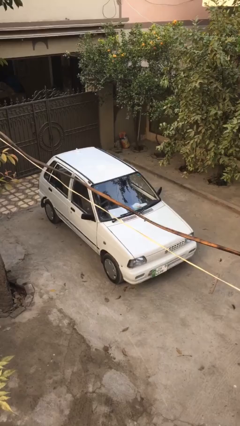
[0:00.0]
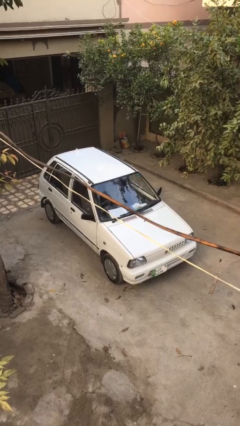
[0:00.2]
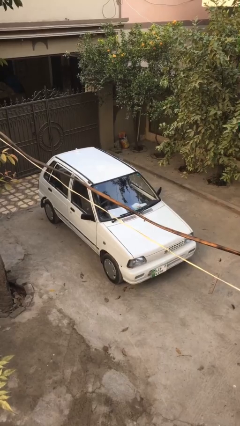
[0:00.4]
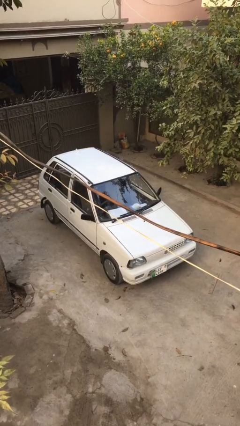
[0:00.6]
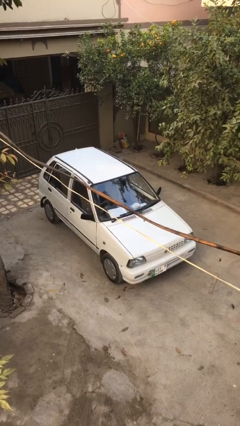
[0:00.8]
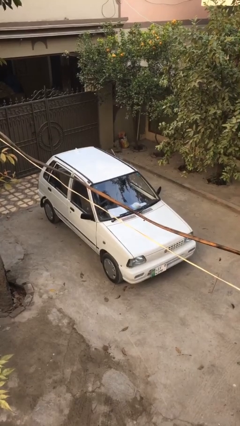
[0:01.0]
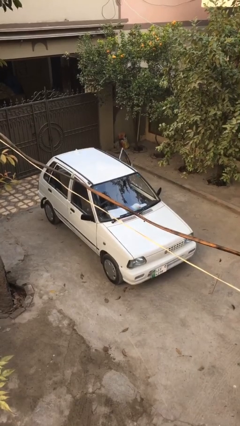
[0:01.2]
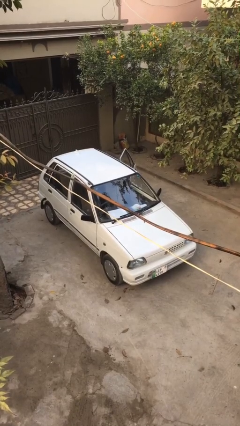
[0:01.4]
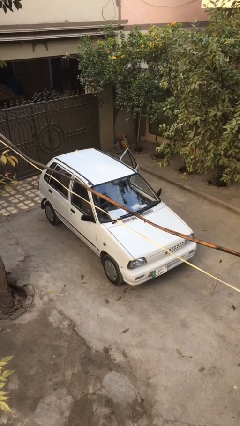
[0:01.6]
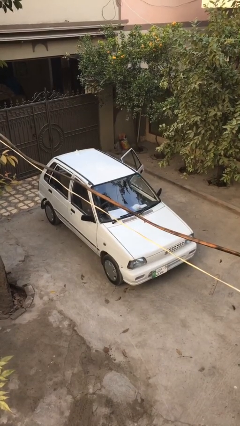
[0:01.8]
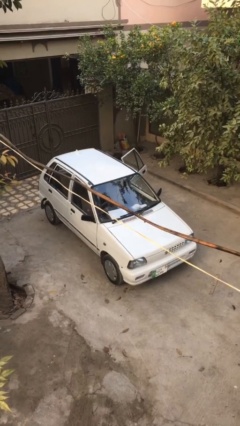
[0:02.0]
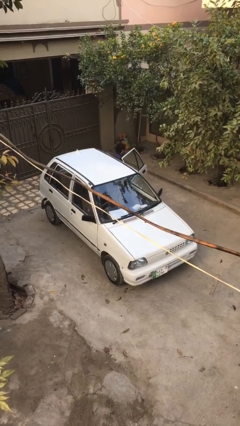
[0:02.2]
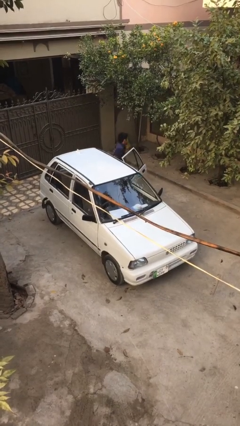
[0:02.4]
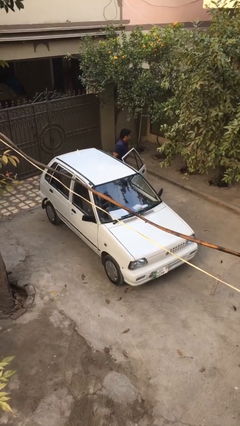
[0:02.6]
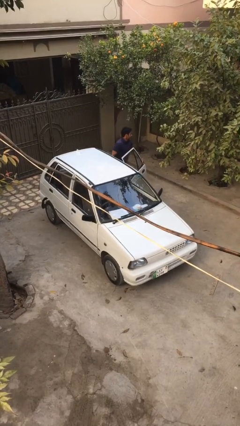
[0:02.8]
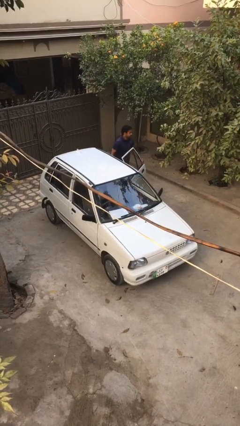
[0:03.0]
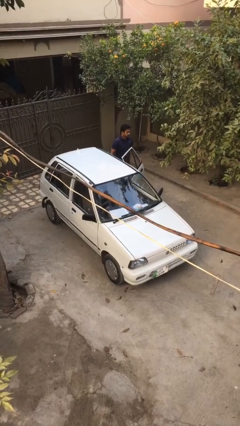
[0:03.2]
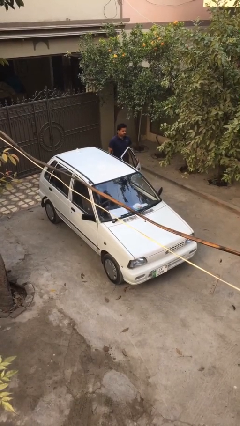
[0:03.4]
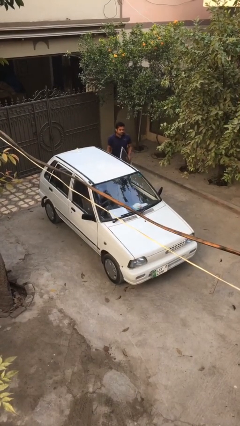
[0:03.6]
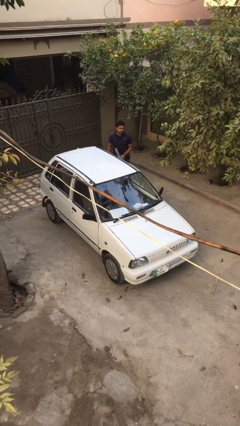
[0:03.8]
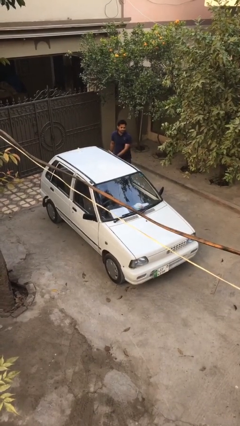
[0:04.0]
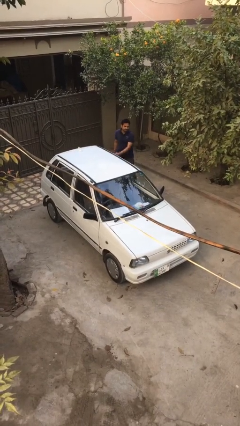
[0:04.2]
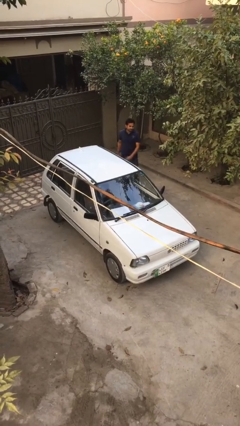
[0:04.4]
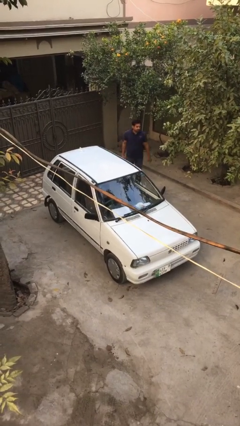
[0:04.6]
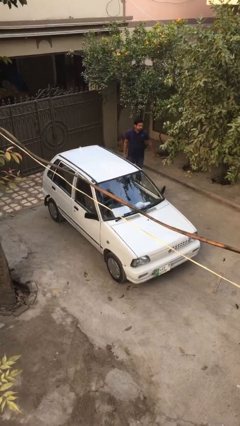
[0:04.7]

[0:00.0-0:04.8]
car drops off person

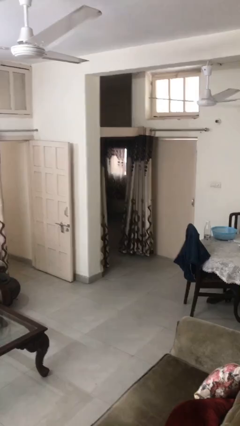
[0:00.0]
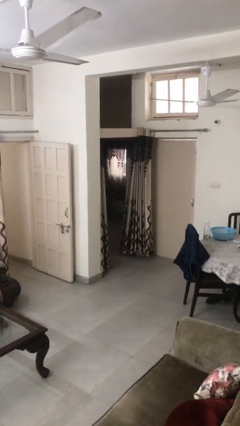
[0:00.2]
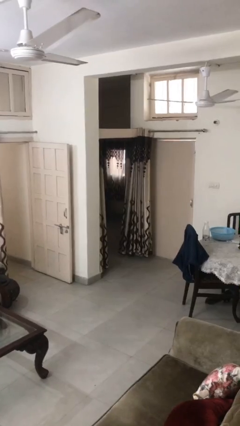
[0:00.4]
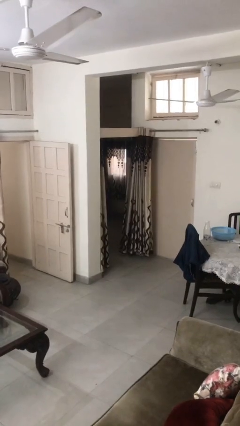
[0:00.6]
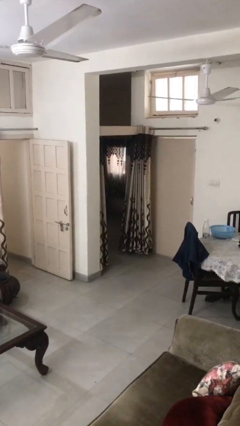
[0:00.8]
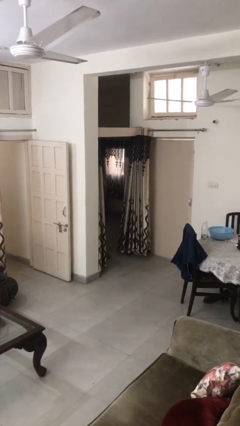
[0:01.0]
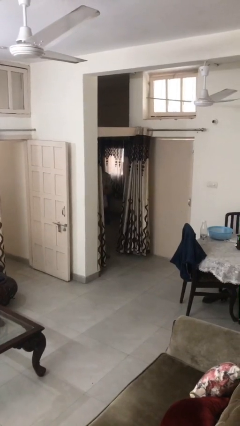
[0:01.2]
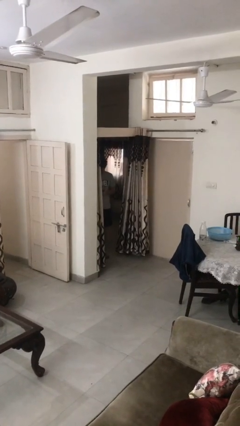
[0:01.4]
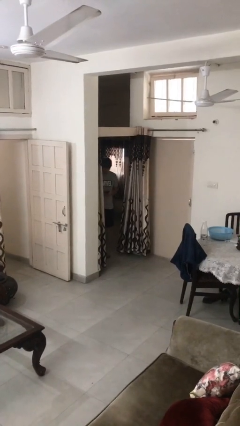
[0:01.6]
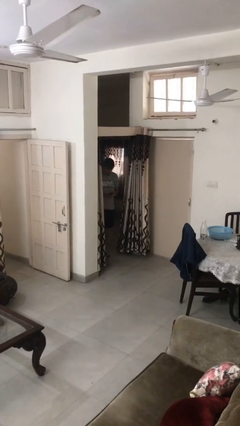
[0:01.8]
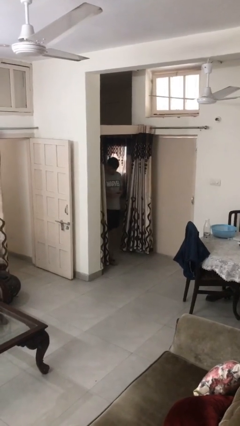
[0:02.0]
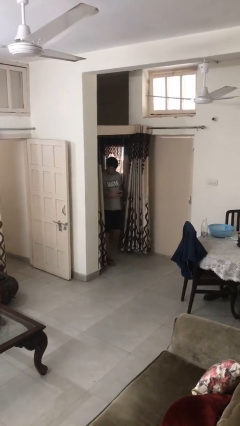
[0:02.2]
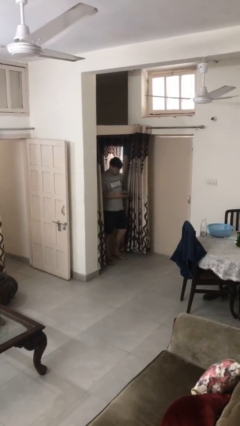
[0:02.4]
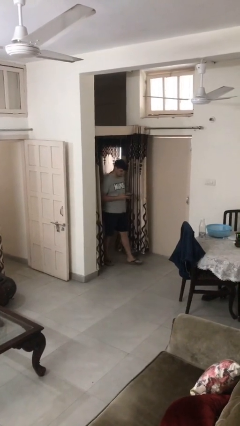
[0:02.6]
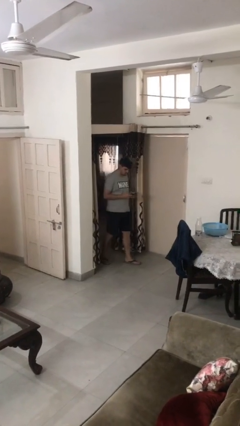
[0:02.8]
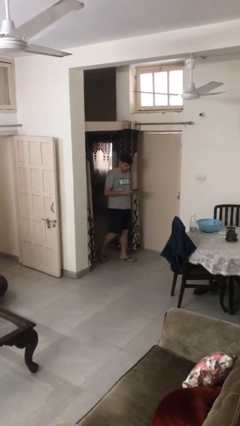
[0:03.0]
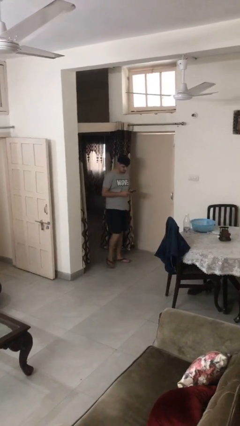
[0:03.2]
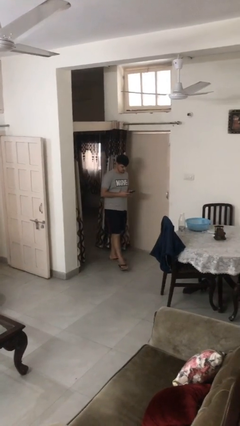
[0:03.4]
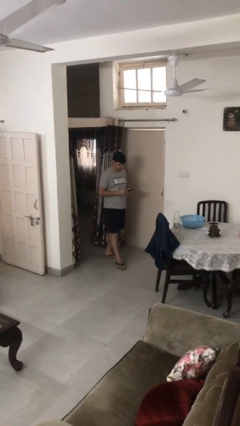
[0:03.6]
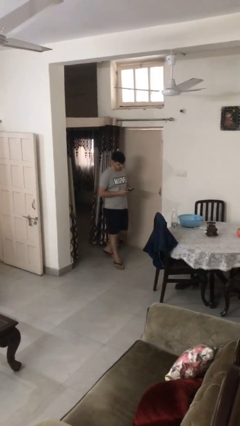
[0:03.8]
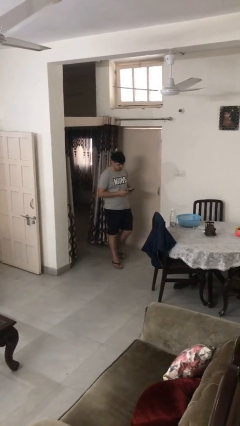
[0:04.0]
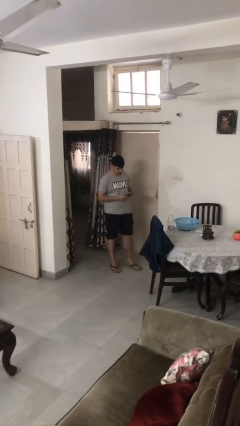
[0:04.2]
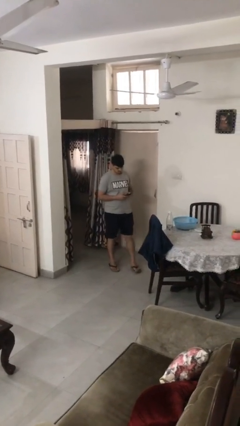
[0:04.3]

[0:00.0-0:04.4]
person enters scene through structure

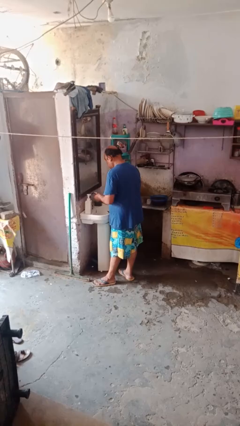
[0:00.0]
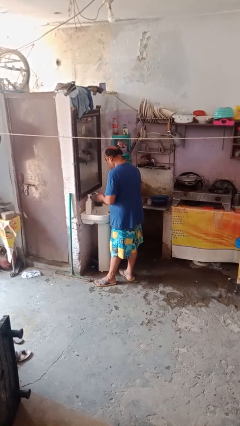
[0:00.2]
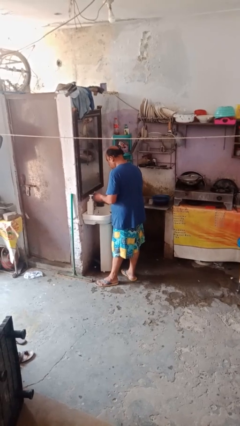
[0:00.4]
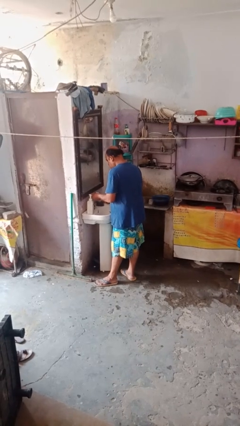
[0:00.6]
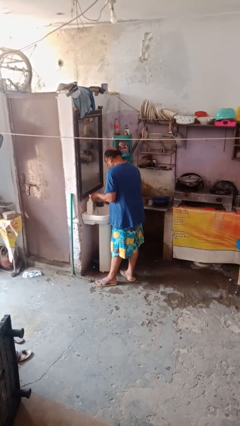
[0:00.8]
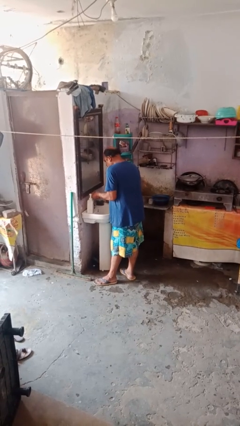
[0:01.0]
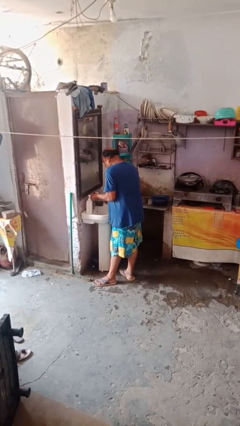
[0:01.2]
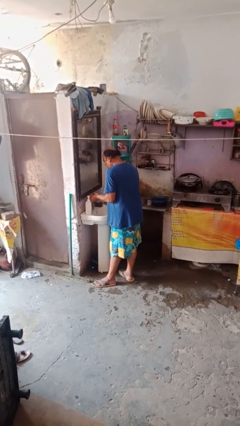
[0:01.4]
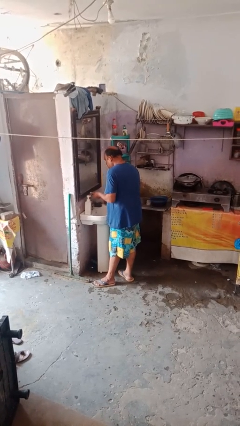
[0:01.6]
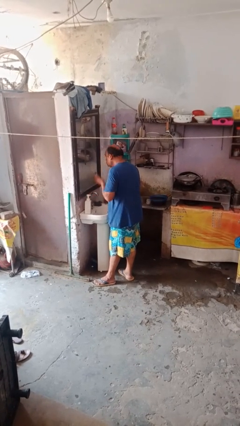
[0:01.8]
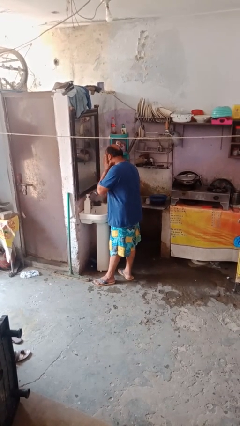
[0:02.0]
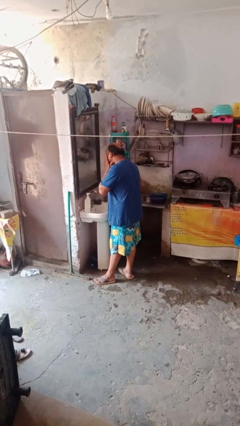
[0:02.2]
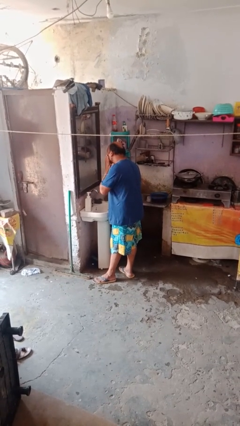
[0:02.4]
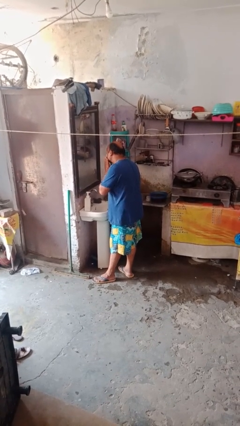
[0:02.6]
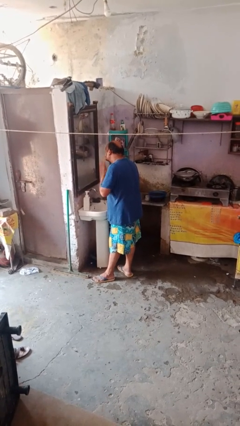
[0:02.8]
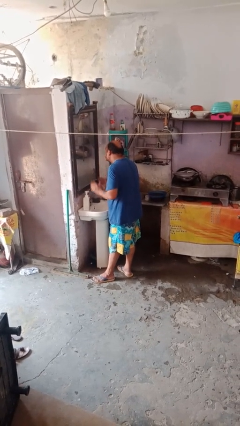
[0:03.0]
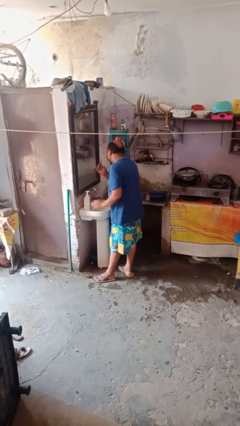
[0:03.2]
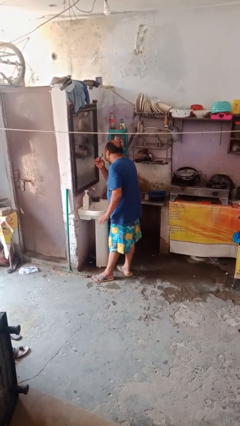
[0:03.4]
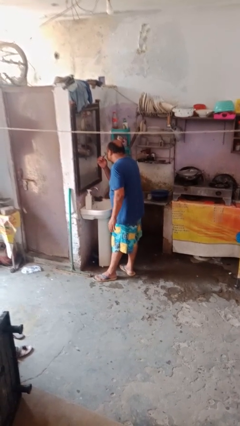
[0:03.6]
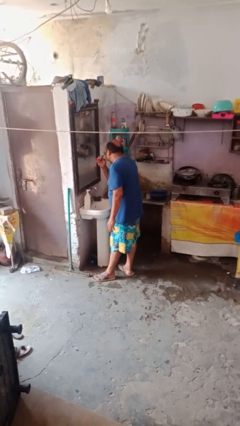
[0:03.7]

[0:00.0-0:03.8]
person applies shaving cream

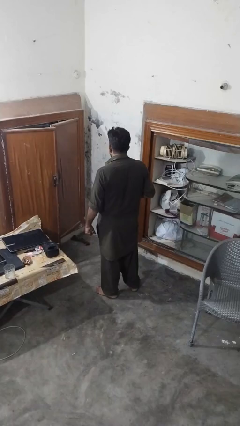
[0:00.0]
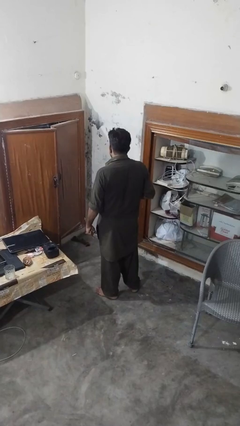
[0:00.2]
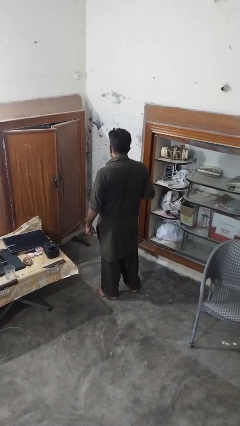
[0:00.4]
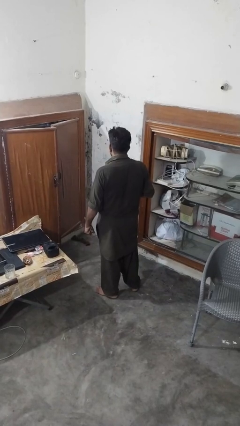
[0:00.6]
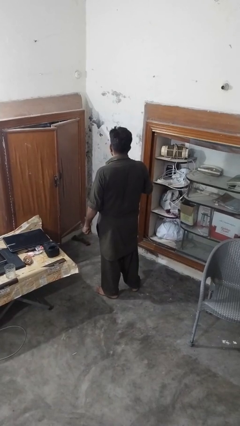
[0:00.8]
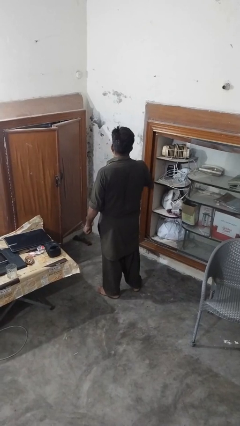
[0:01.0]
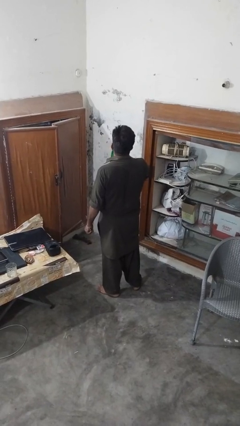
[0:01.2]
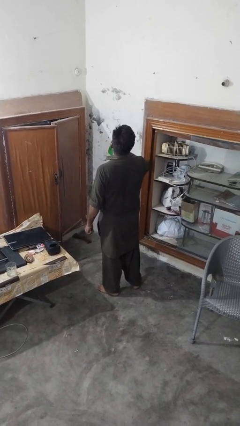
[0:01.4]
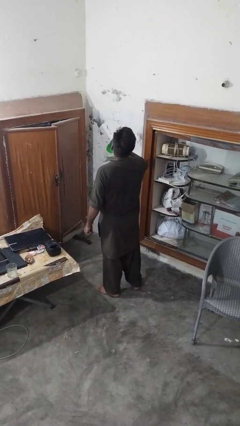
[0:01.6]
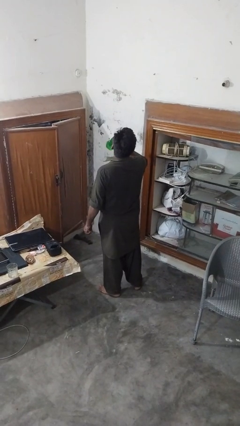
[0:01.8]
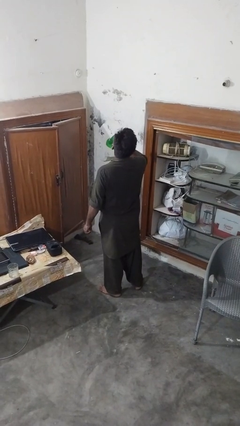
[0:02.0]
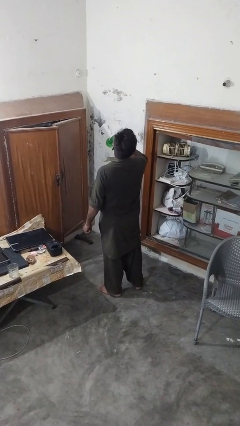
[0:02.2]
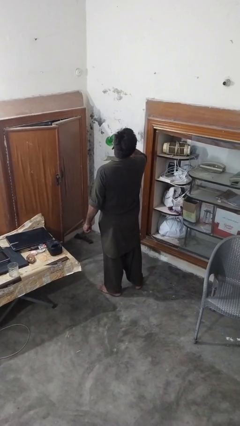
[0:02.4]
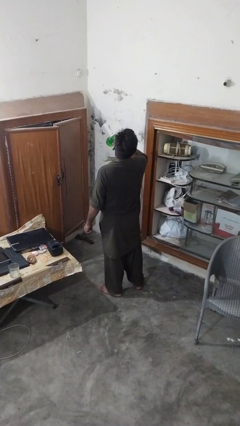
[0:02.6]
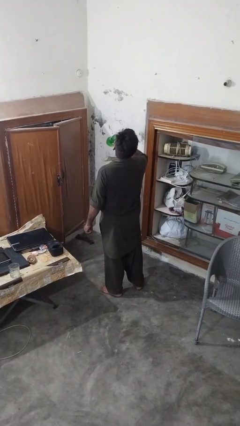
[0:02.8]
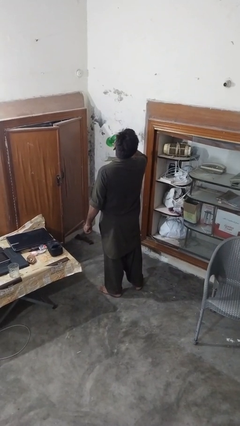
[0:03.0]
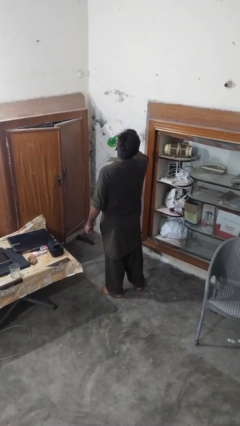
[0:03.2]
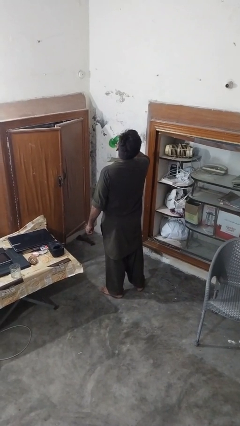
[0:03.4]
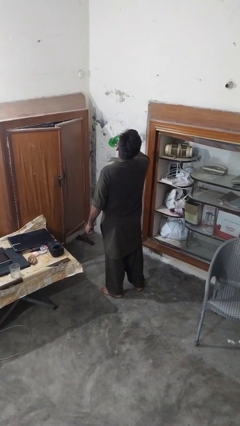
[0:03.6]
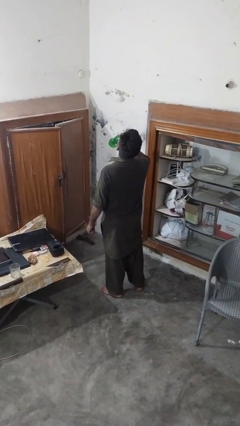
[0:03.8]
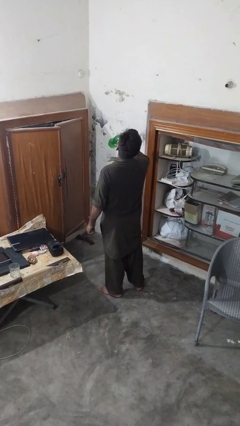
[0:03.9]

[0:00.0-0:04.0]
person drinks from bottle

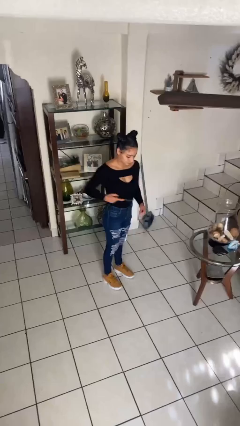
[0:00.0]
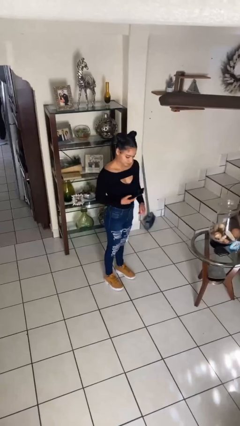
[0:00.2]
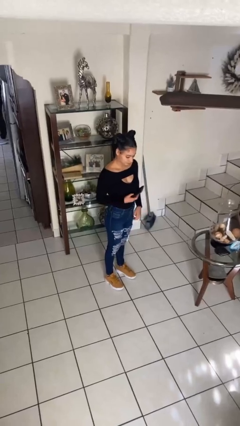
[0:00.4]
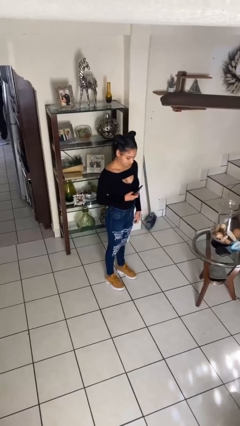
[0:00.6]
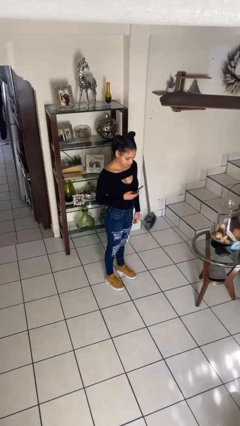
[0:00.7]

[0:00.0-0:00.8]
person takes phone from pocket
